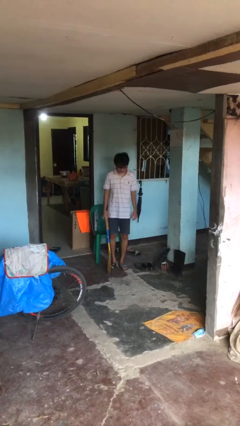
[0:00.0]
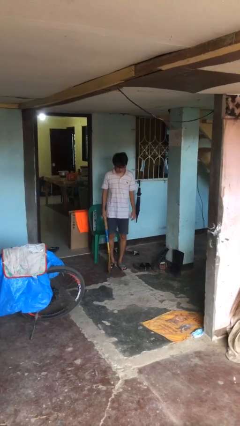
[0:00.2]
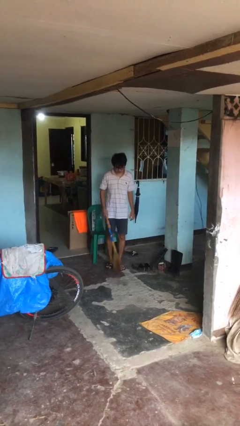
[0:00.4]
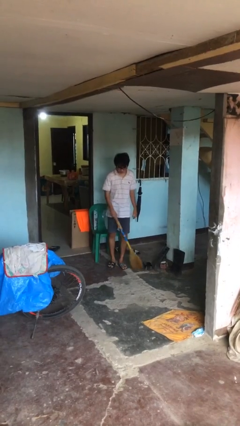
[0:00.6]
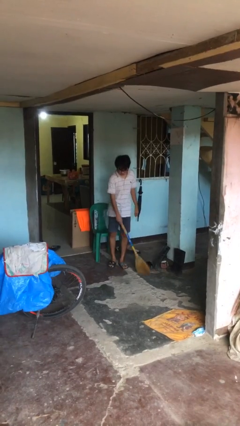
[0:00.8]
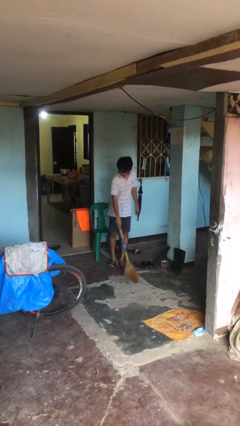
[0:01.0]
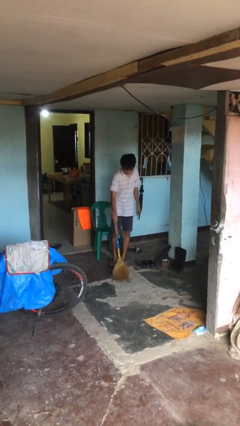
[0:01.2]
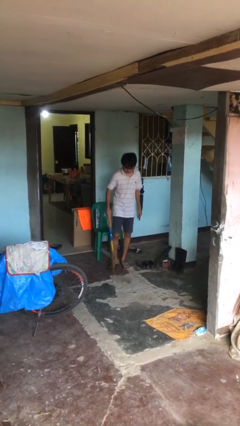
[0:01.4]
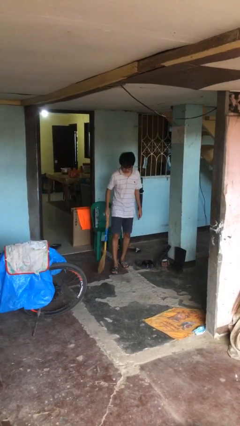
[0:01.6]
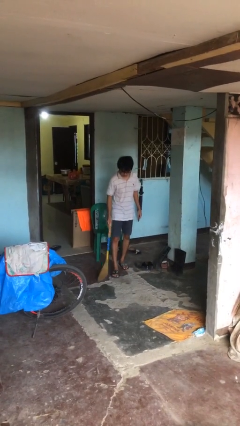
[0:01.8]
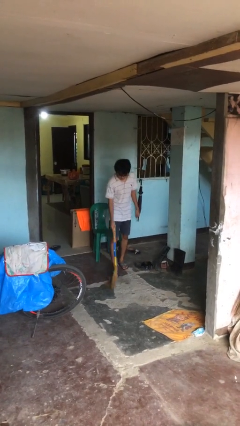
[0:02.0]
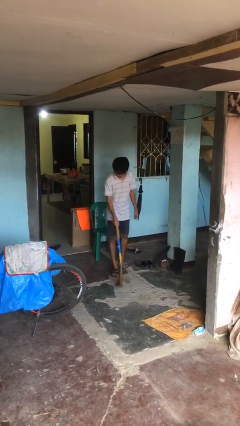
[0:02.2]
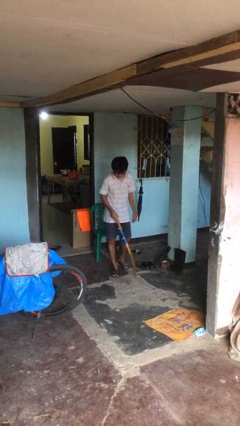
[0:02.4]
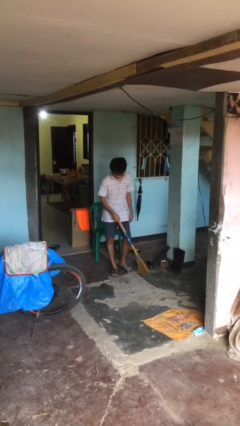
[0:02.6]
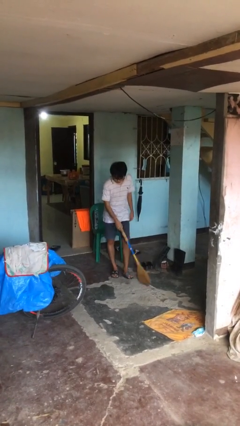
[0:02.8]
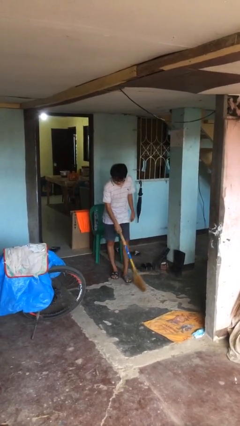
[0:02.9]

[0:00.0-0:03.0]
person sweeps floor

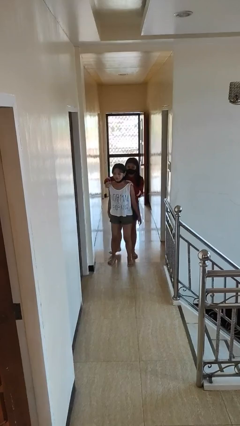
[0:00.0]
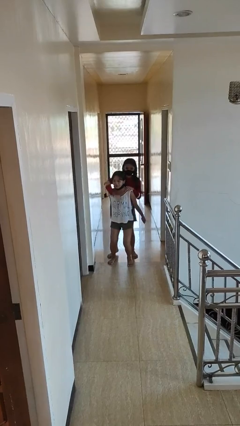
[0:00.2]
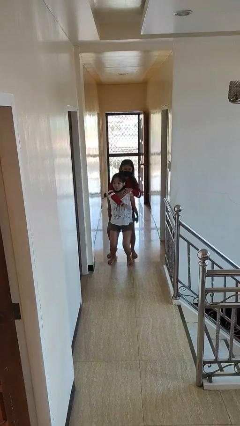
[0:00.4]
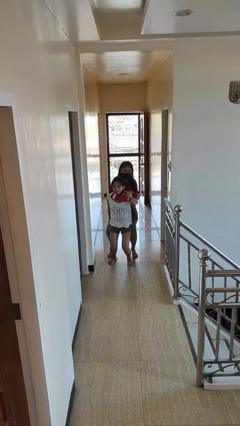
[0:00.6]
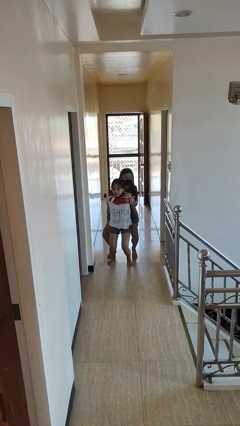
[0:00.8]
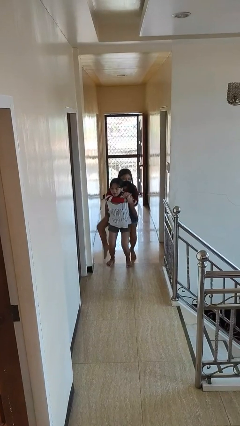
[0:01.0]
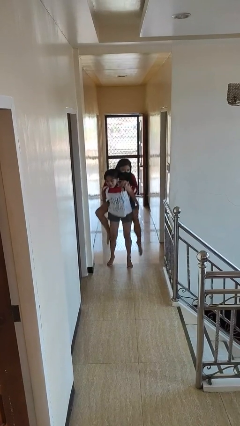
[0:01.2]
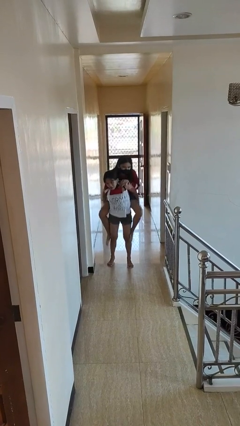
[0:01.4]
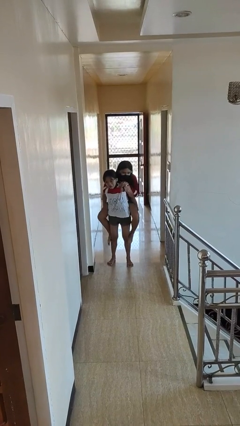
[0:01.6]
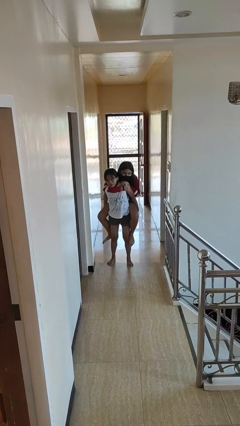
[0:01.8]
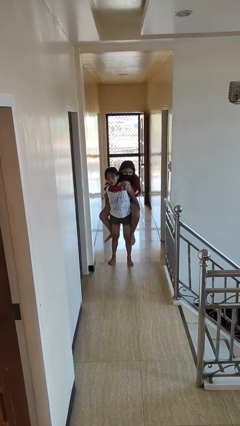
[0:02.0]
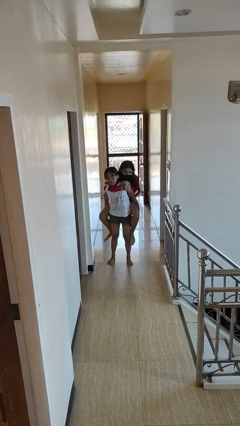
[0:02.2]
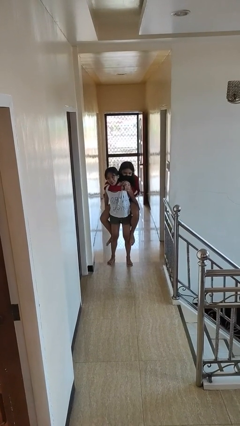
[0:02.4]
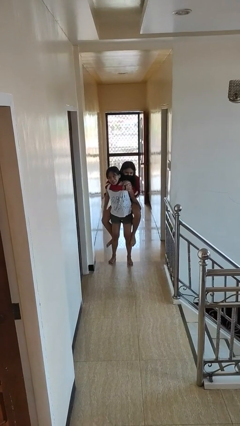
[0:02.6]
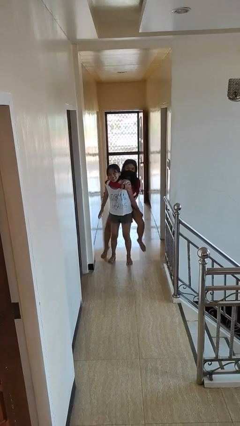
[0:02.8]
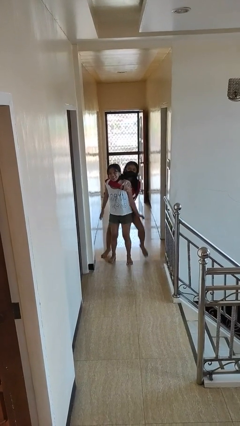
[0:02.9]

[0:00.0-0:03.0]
person carries person over shoulder

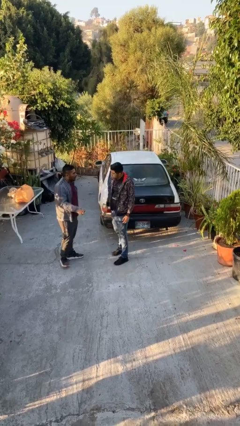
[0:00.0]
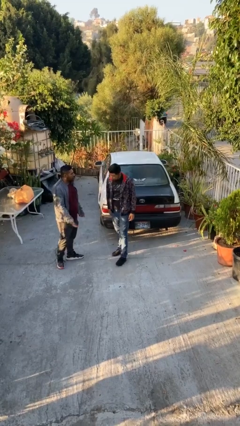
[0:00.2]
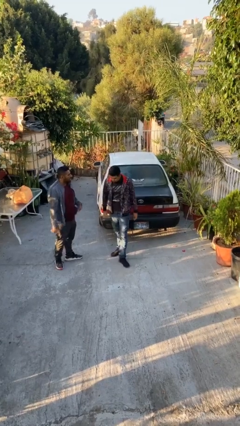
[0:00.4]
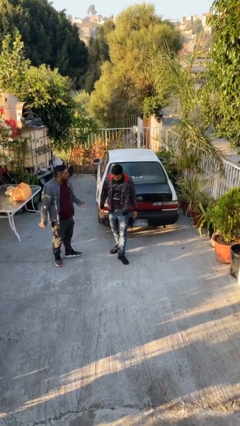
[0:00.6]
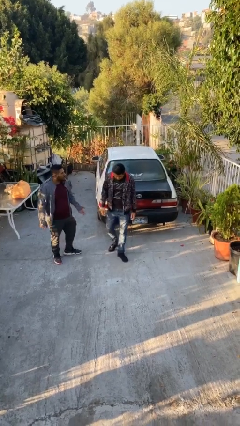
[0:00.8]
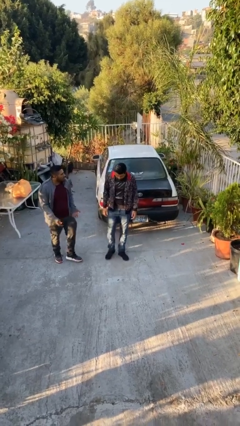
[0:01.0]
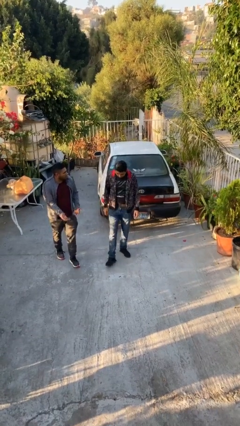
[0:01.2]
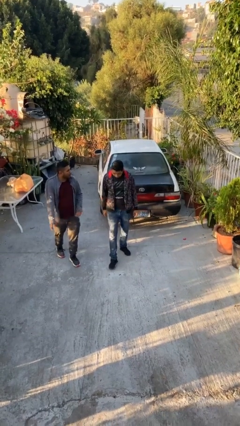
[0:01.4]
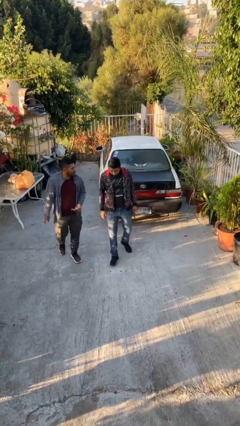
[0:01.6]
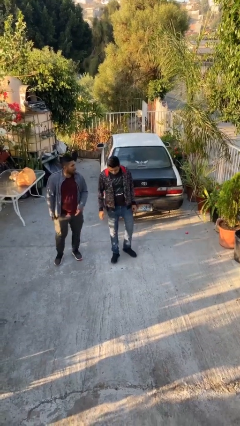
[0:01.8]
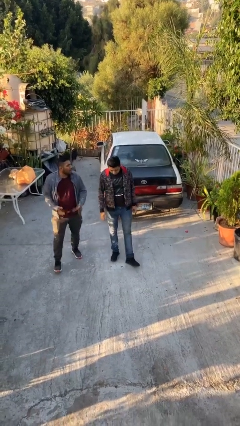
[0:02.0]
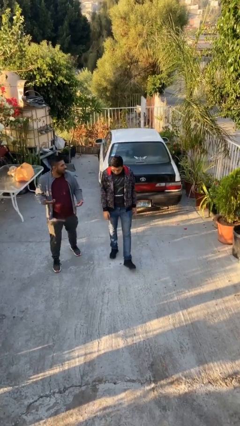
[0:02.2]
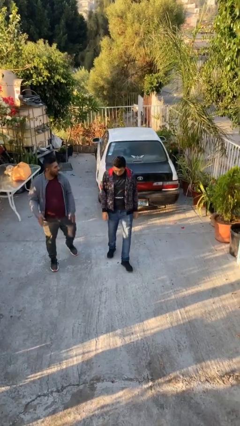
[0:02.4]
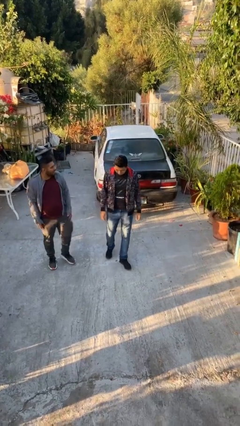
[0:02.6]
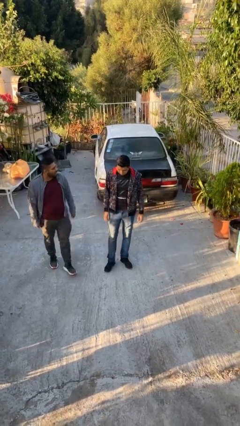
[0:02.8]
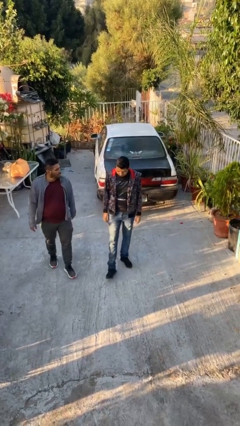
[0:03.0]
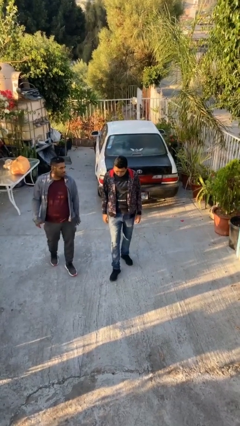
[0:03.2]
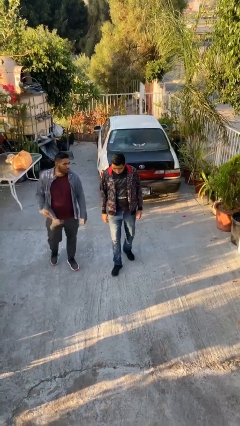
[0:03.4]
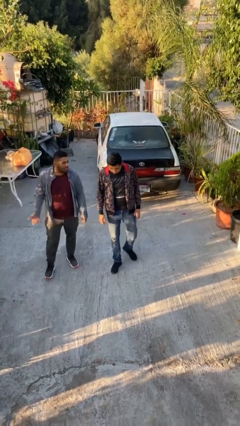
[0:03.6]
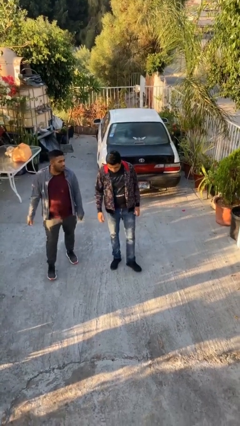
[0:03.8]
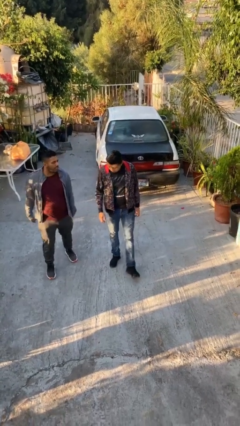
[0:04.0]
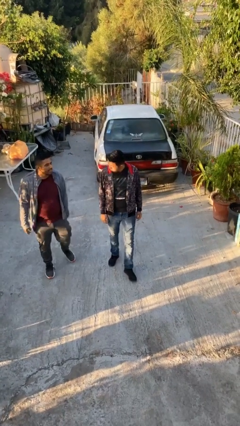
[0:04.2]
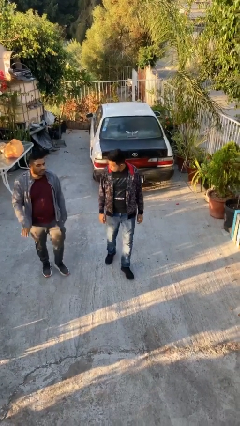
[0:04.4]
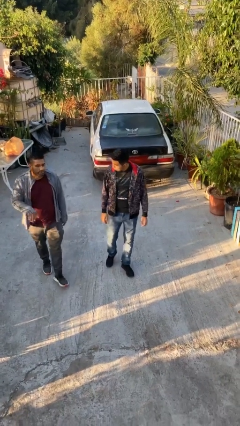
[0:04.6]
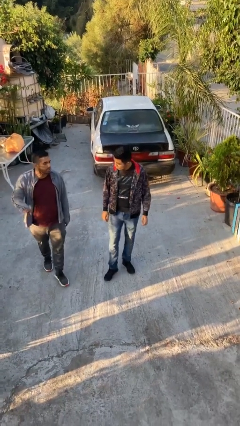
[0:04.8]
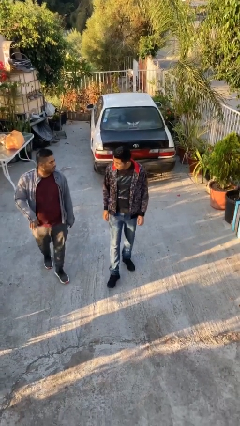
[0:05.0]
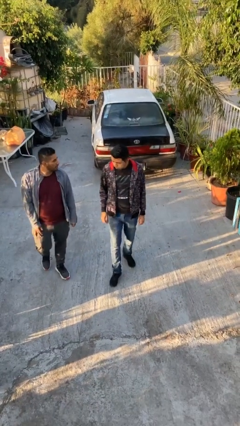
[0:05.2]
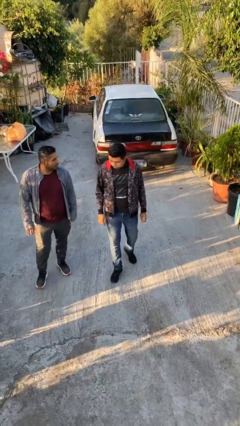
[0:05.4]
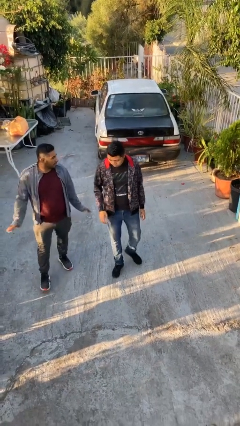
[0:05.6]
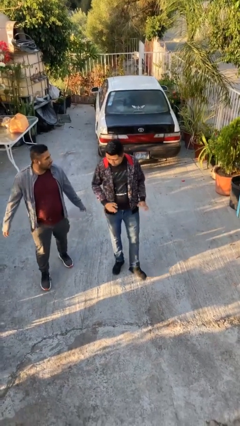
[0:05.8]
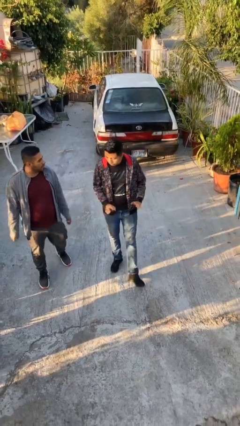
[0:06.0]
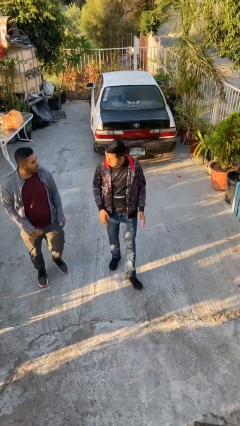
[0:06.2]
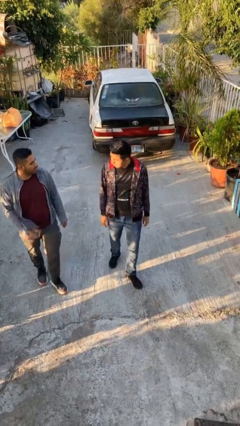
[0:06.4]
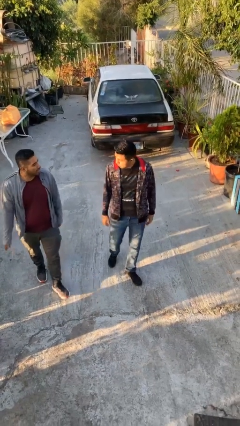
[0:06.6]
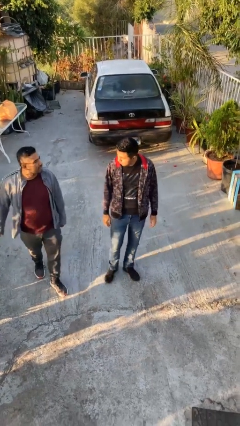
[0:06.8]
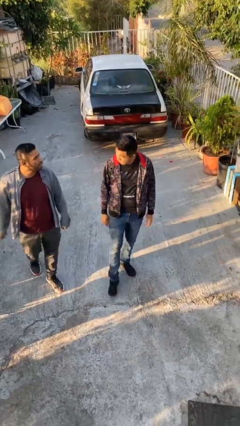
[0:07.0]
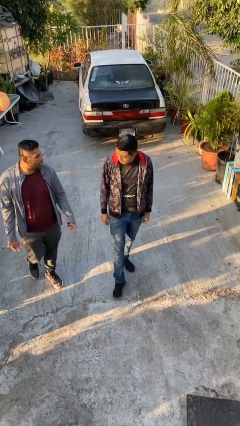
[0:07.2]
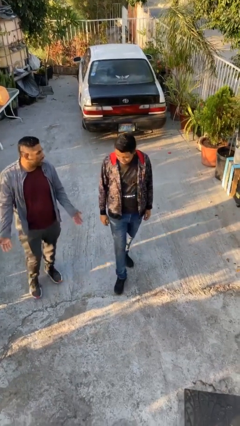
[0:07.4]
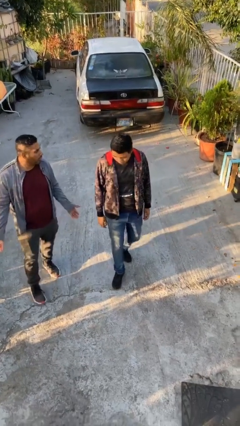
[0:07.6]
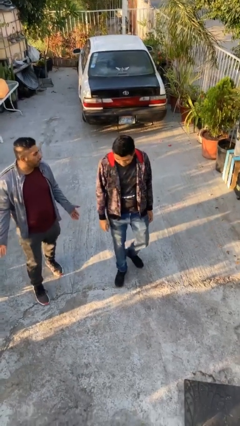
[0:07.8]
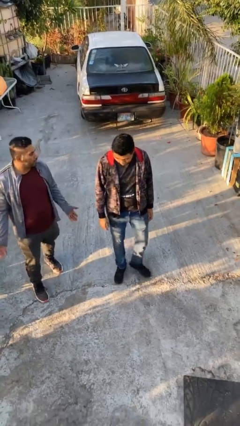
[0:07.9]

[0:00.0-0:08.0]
person talks to person

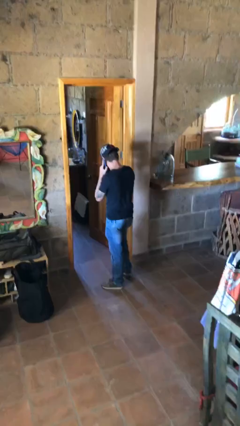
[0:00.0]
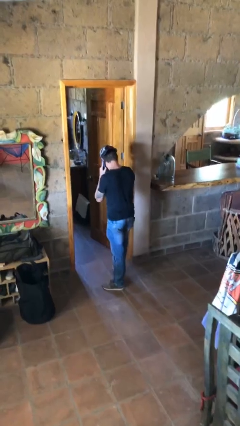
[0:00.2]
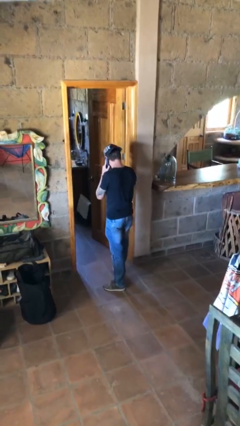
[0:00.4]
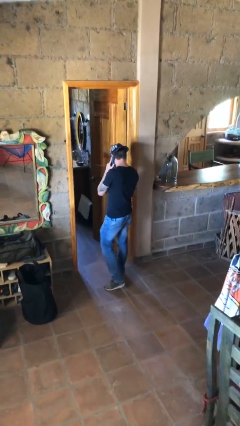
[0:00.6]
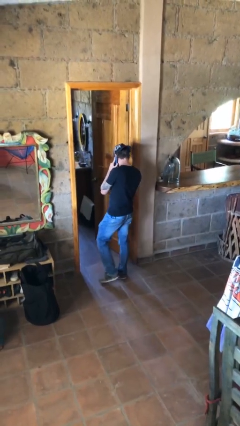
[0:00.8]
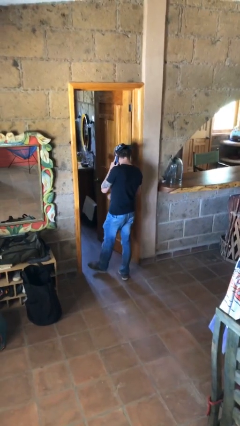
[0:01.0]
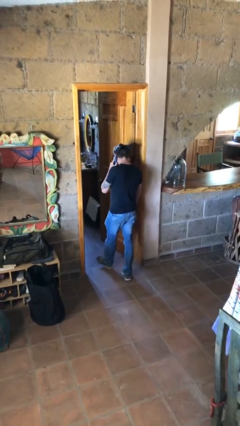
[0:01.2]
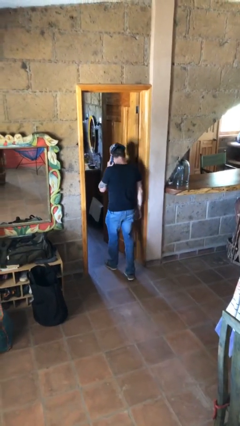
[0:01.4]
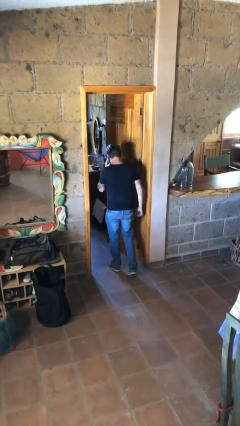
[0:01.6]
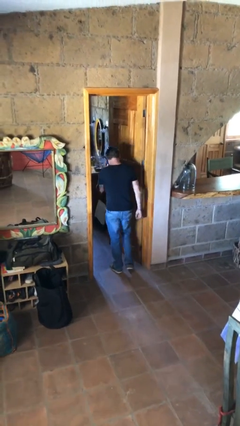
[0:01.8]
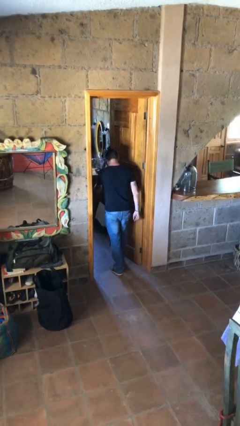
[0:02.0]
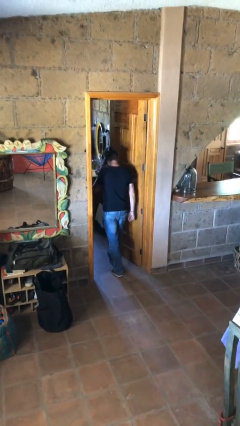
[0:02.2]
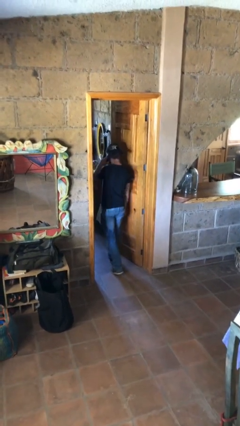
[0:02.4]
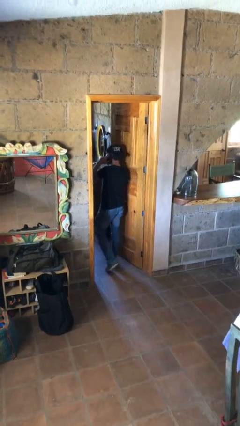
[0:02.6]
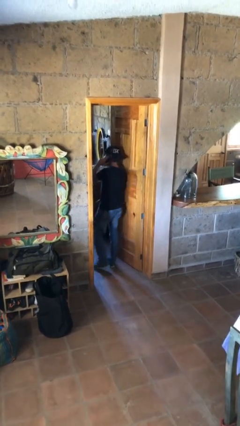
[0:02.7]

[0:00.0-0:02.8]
person exits scene through structure

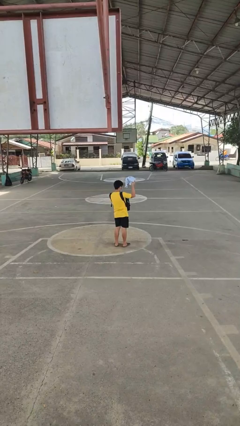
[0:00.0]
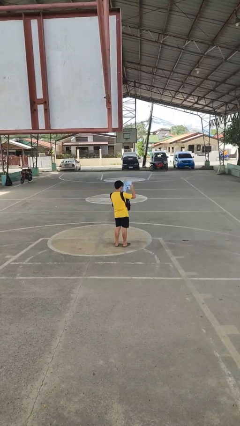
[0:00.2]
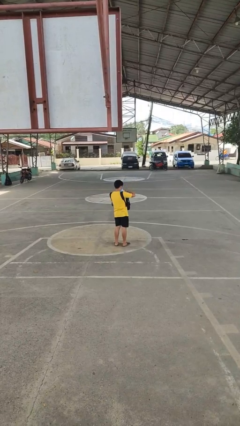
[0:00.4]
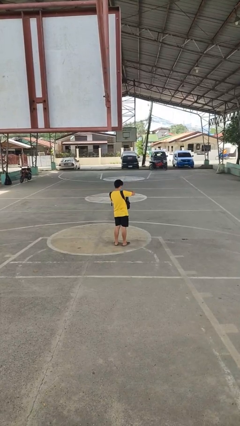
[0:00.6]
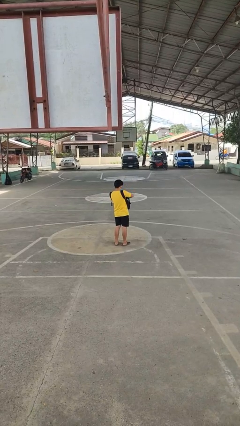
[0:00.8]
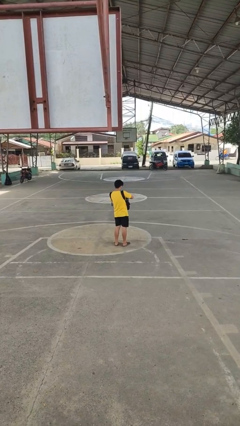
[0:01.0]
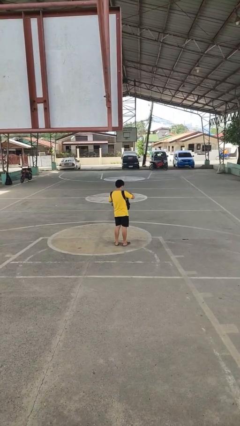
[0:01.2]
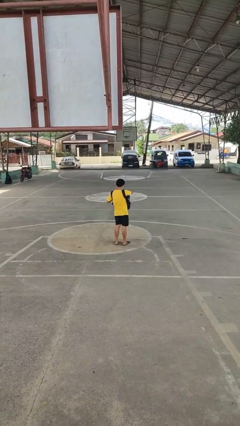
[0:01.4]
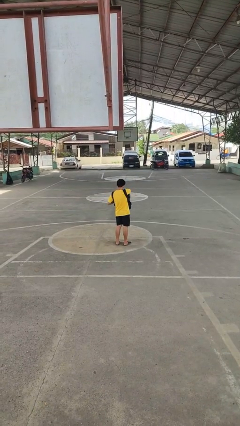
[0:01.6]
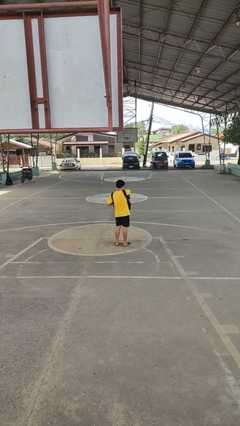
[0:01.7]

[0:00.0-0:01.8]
person puts object into backpack
